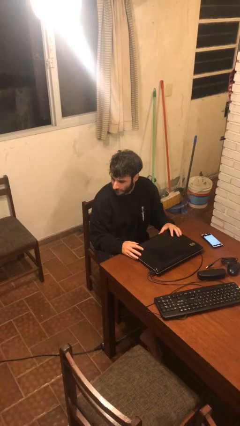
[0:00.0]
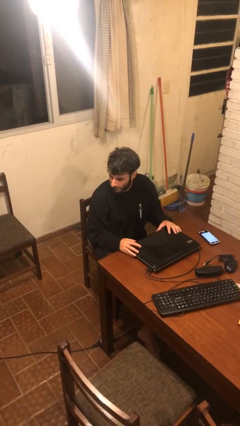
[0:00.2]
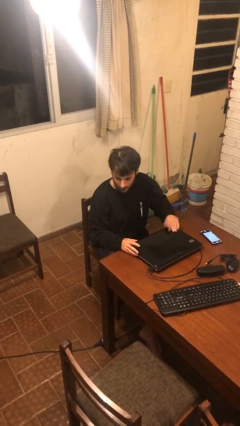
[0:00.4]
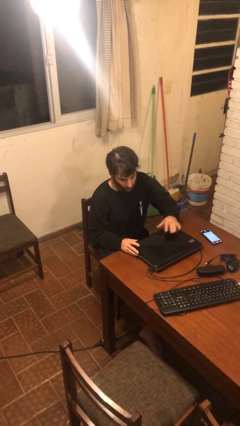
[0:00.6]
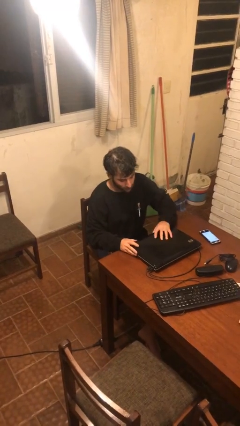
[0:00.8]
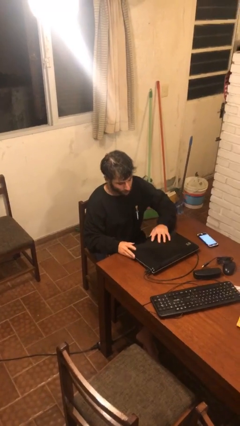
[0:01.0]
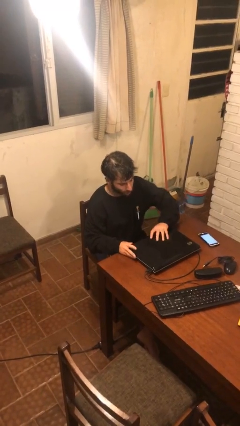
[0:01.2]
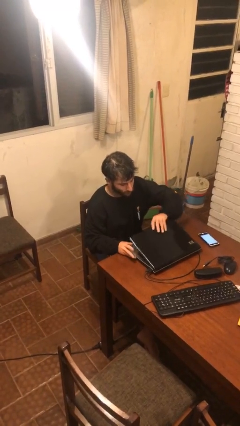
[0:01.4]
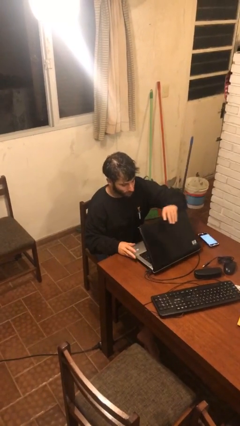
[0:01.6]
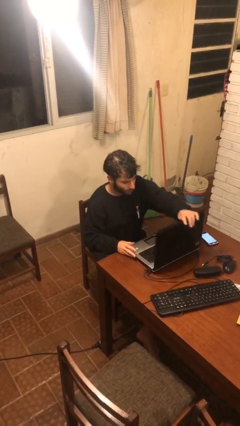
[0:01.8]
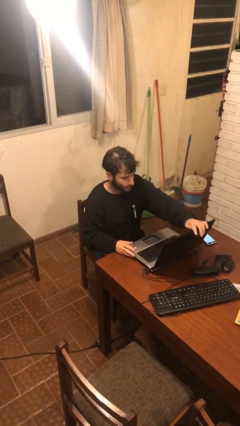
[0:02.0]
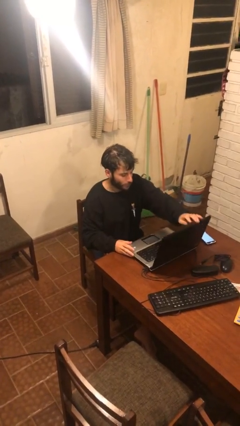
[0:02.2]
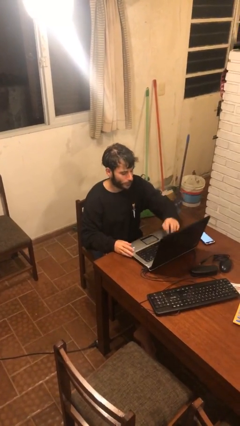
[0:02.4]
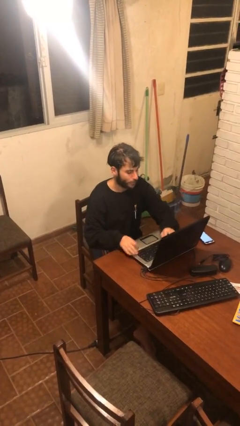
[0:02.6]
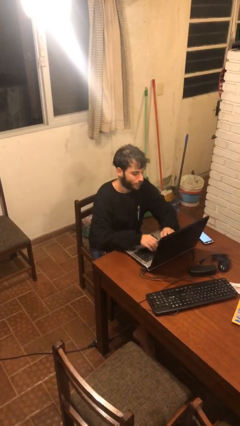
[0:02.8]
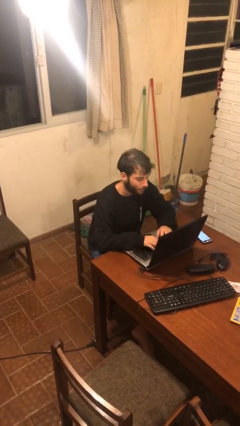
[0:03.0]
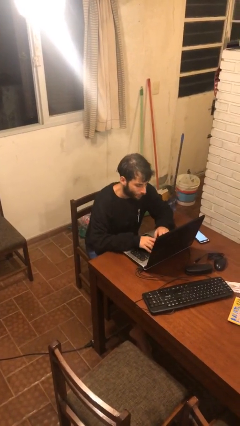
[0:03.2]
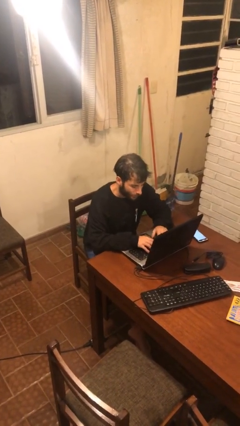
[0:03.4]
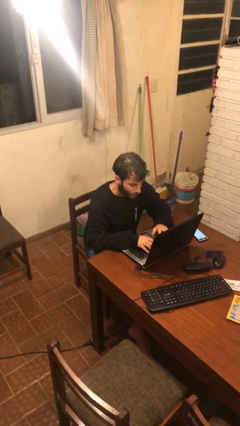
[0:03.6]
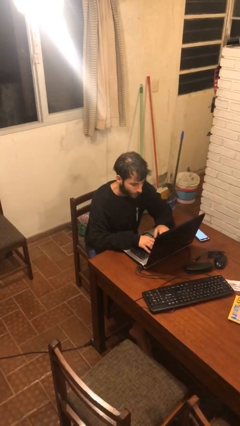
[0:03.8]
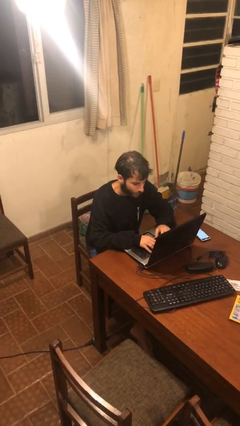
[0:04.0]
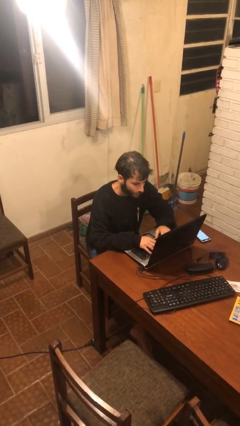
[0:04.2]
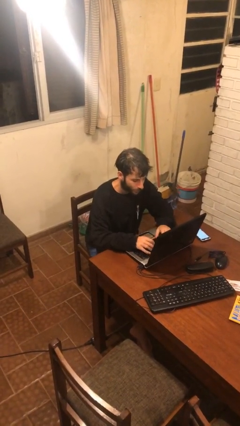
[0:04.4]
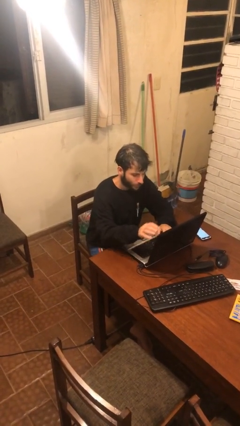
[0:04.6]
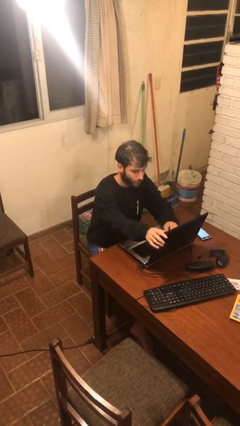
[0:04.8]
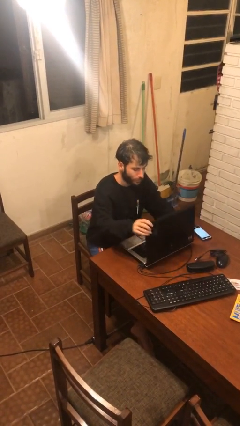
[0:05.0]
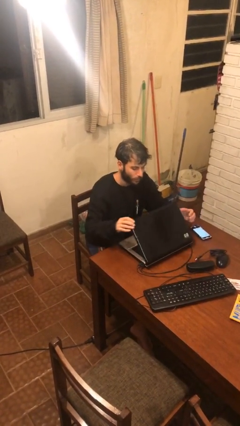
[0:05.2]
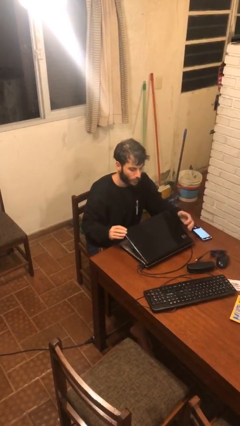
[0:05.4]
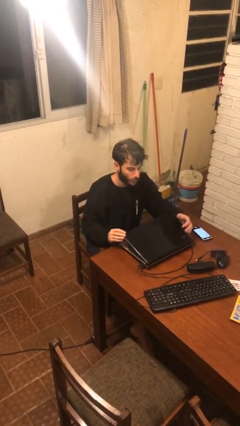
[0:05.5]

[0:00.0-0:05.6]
person interacts with laptop

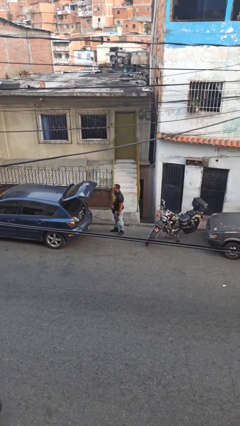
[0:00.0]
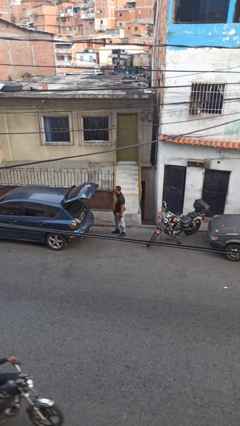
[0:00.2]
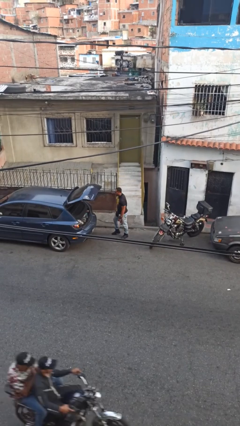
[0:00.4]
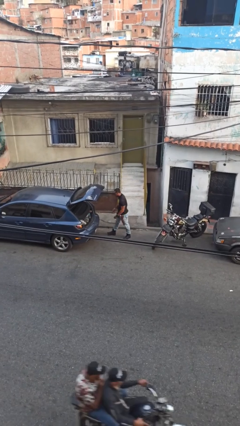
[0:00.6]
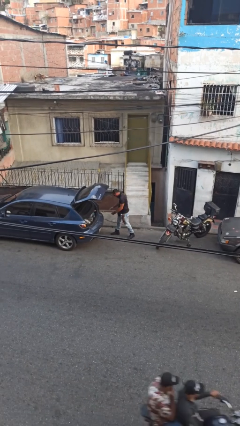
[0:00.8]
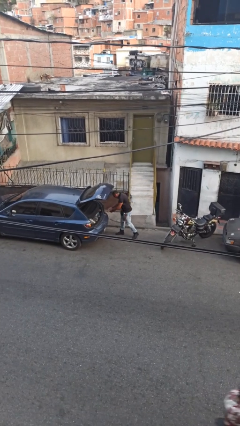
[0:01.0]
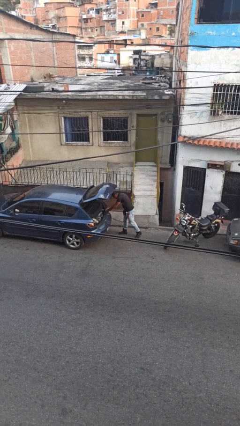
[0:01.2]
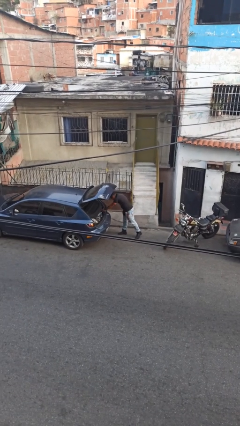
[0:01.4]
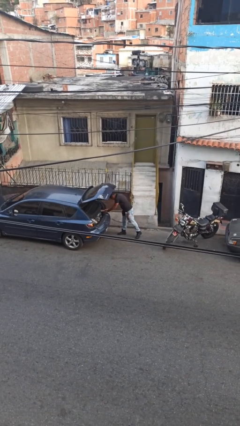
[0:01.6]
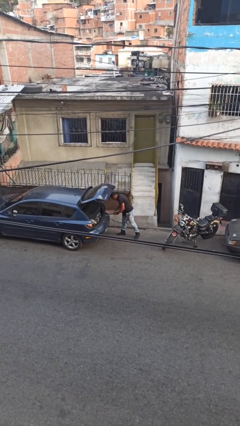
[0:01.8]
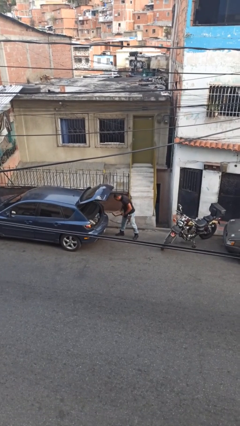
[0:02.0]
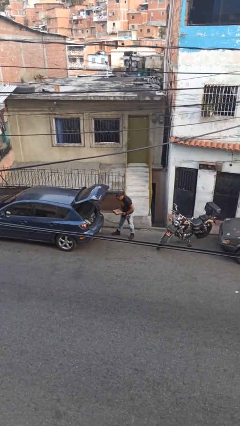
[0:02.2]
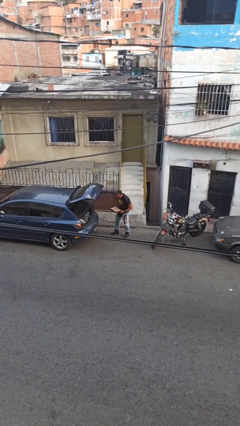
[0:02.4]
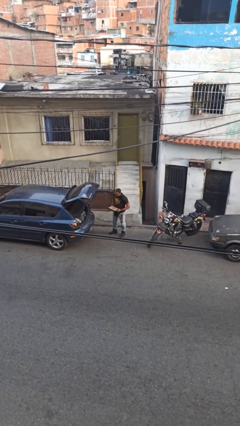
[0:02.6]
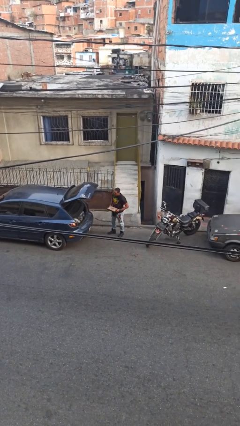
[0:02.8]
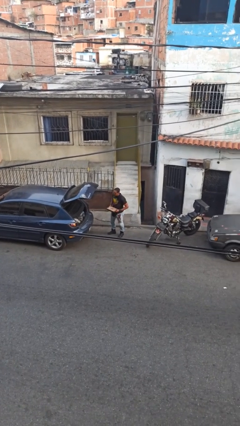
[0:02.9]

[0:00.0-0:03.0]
person unloads car

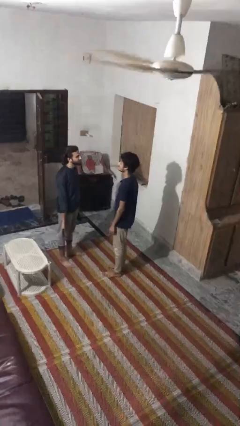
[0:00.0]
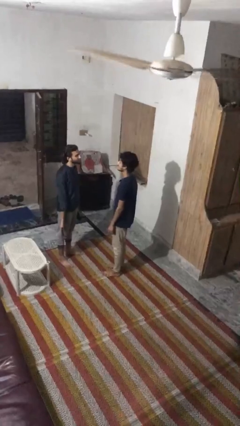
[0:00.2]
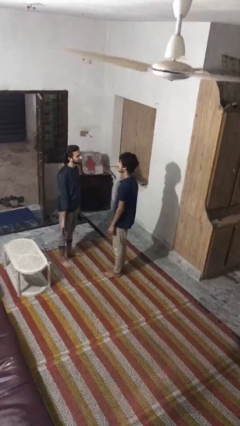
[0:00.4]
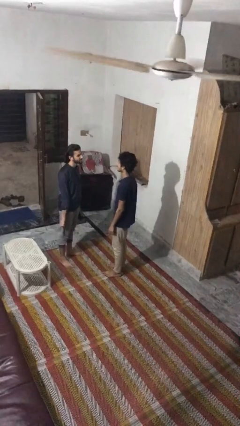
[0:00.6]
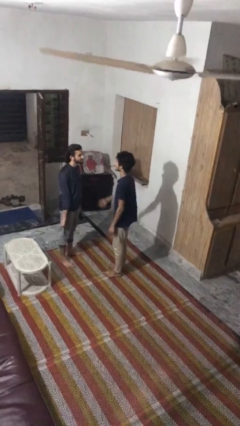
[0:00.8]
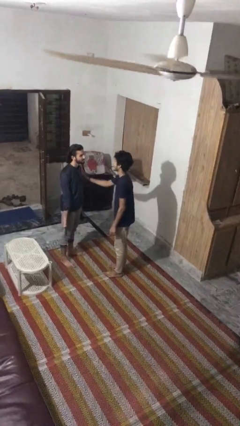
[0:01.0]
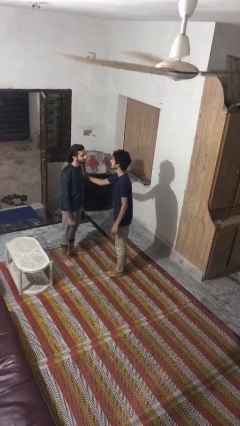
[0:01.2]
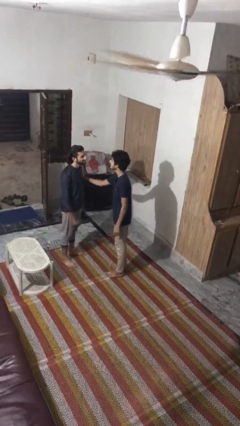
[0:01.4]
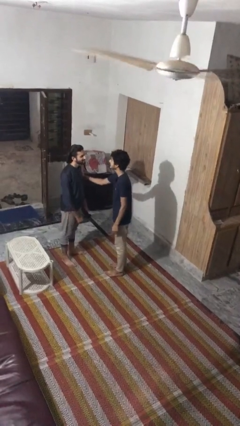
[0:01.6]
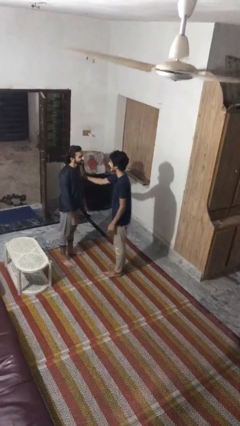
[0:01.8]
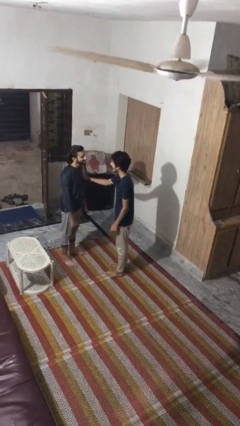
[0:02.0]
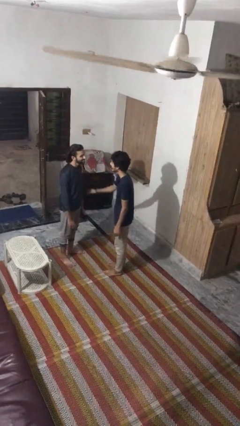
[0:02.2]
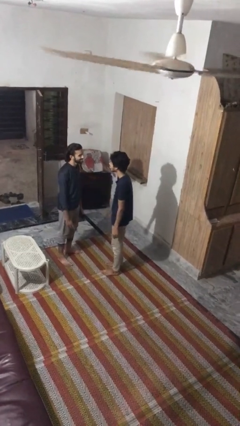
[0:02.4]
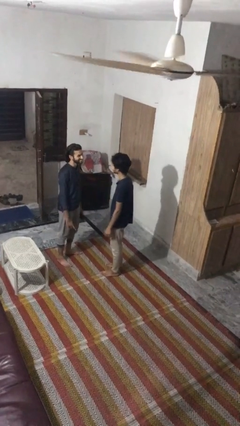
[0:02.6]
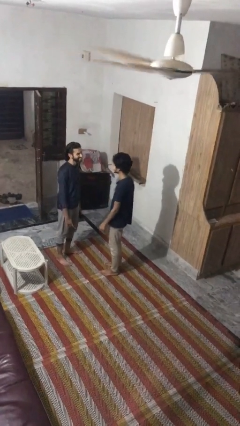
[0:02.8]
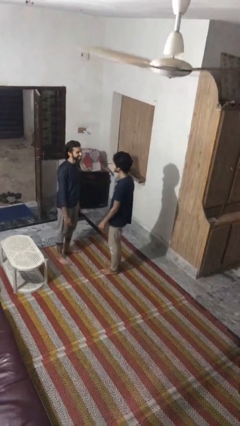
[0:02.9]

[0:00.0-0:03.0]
person grabs person by bicep

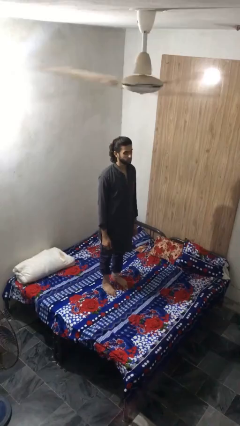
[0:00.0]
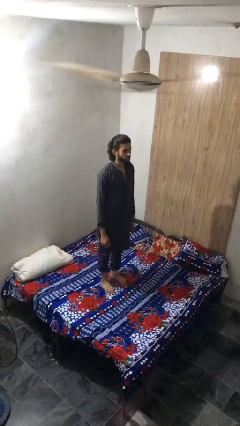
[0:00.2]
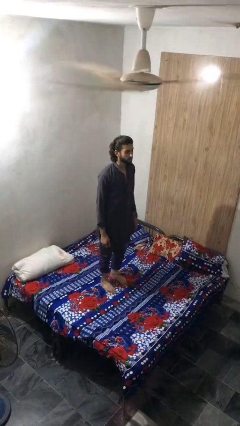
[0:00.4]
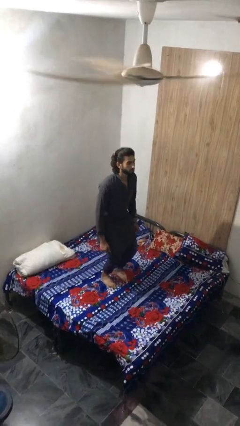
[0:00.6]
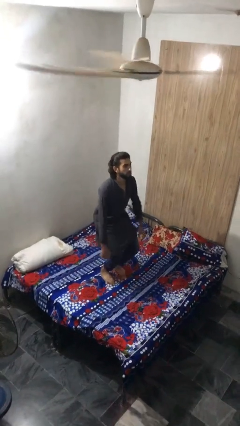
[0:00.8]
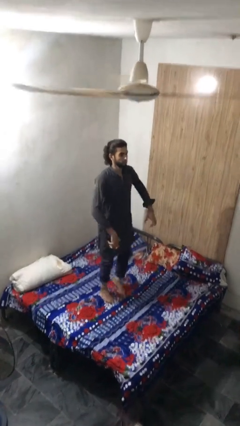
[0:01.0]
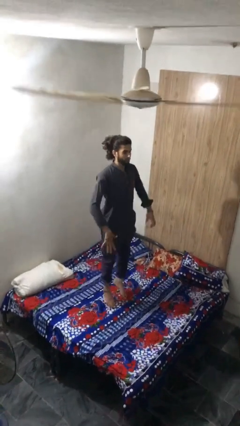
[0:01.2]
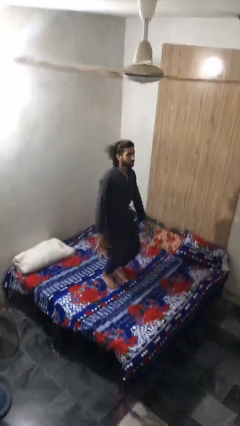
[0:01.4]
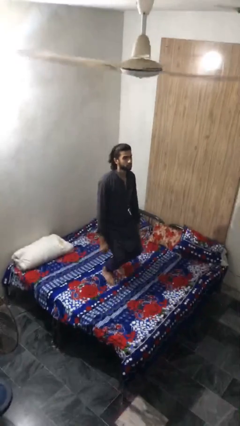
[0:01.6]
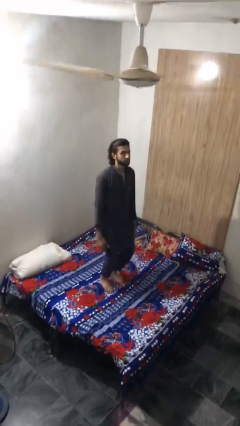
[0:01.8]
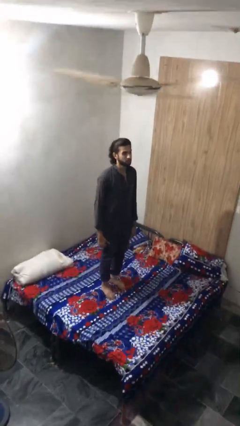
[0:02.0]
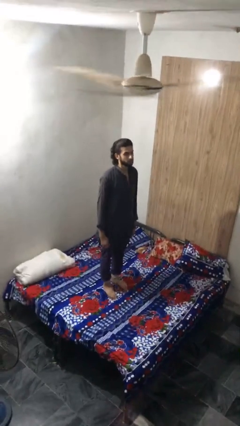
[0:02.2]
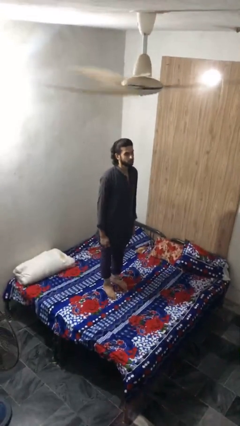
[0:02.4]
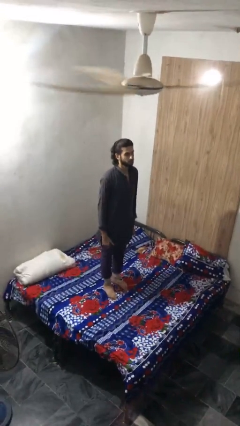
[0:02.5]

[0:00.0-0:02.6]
person jumps on bed

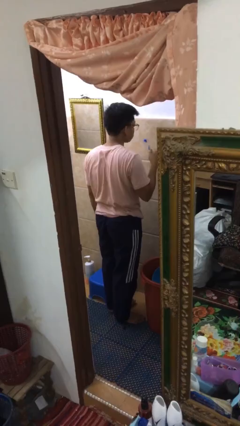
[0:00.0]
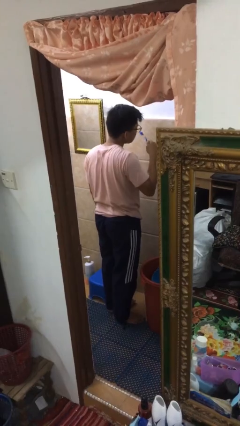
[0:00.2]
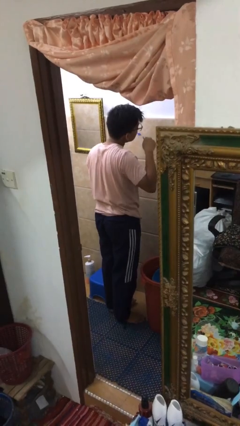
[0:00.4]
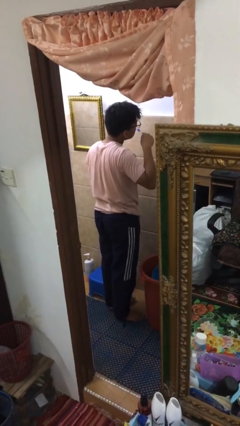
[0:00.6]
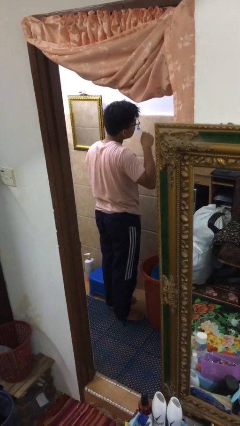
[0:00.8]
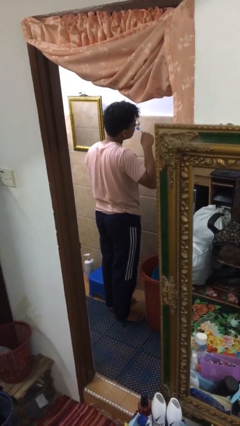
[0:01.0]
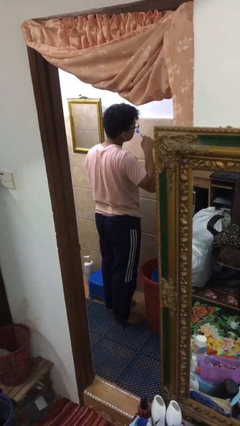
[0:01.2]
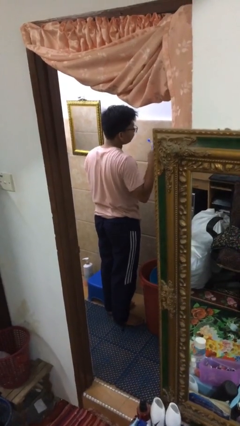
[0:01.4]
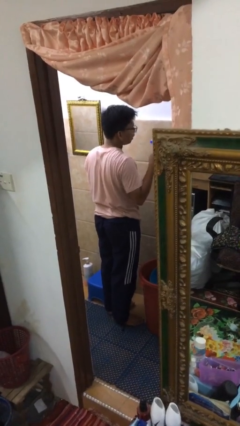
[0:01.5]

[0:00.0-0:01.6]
person brushes teeth

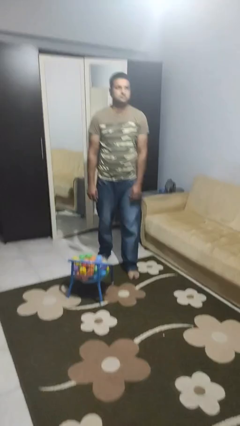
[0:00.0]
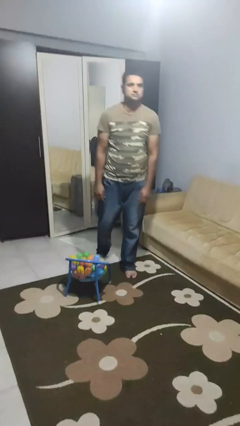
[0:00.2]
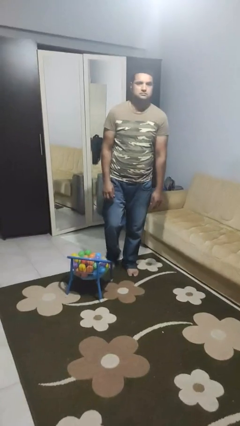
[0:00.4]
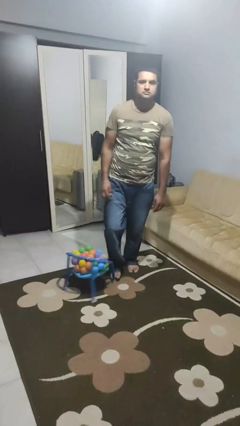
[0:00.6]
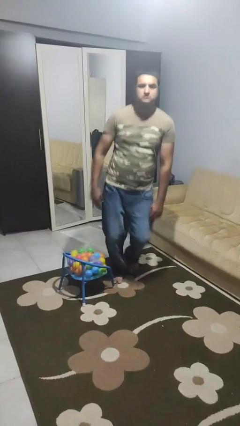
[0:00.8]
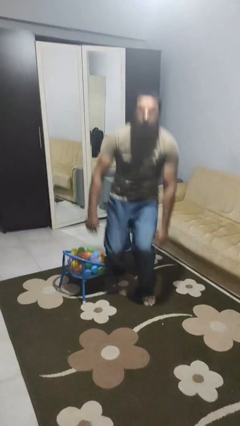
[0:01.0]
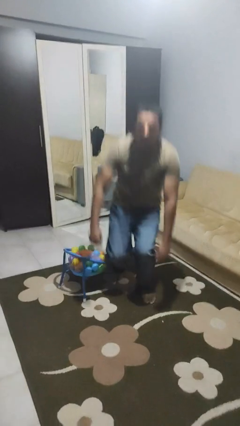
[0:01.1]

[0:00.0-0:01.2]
person trips on object on floor
